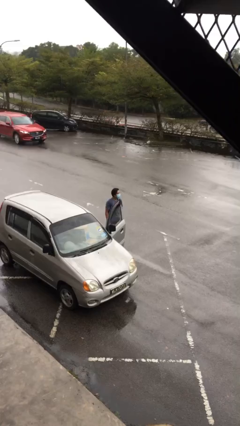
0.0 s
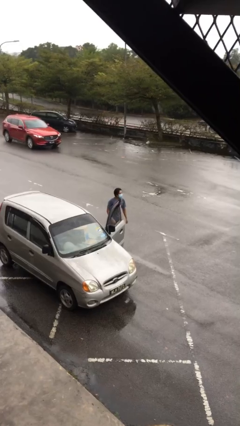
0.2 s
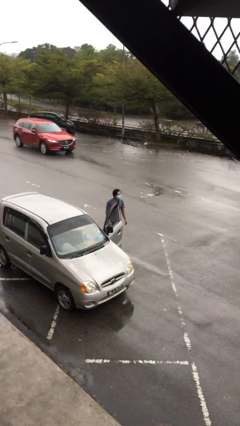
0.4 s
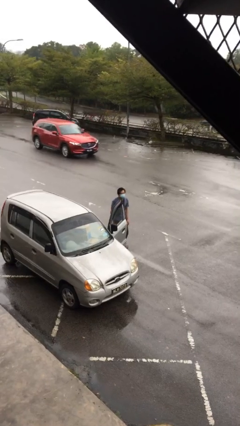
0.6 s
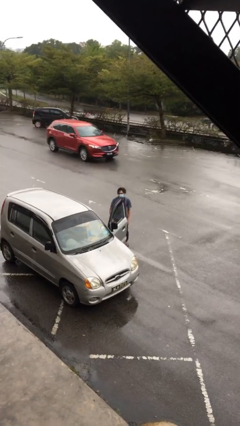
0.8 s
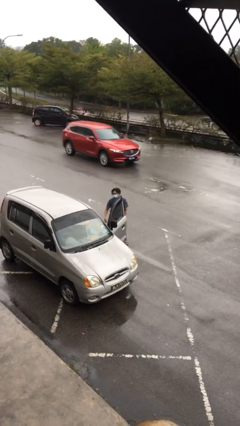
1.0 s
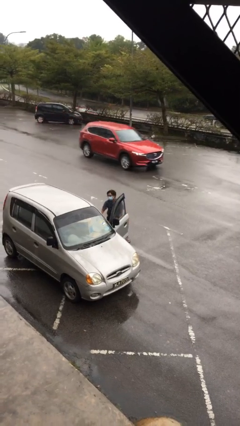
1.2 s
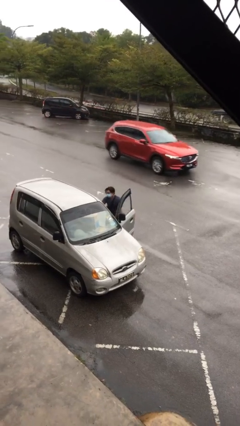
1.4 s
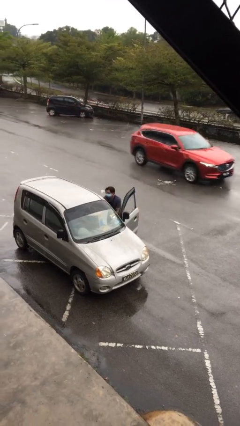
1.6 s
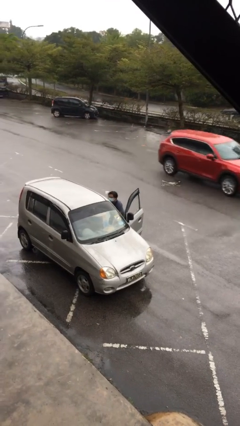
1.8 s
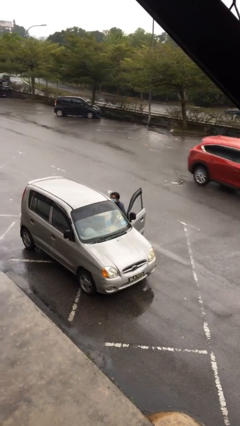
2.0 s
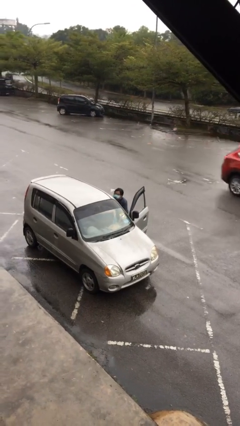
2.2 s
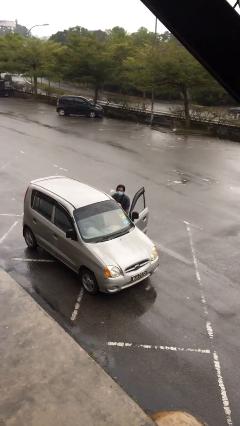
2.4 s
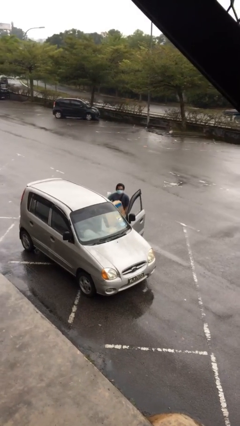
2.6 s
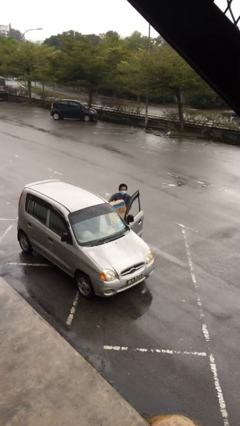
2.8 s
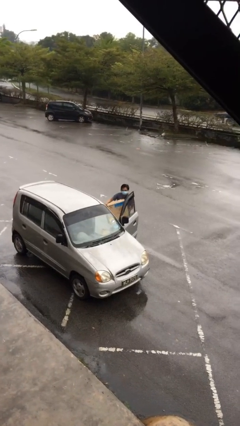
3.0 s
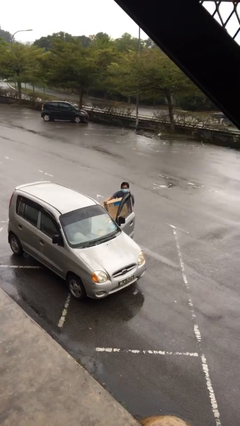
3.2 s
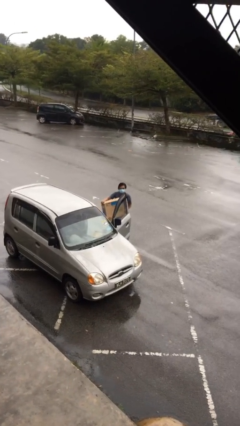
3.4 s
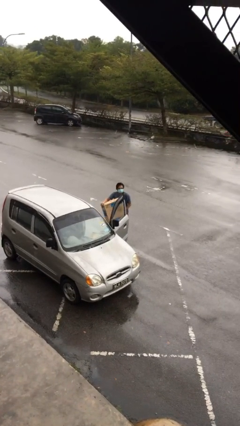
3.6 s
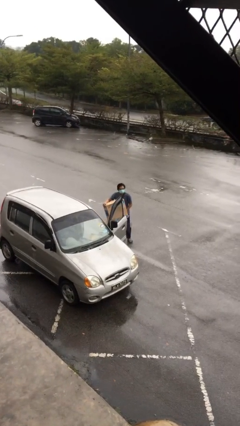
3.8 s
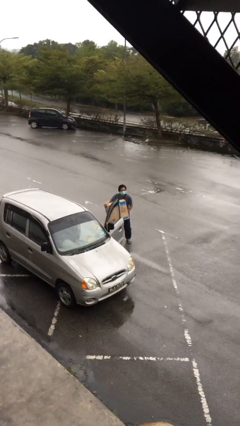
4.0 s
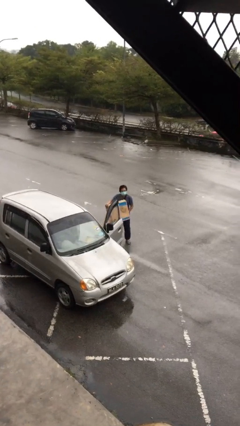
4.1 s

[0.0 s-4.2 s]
person unloads car

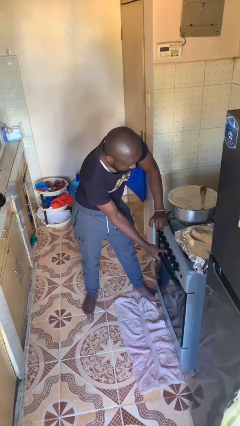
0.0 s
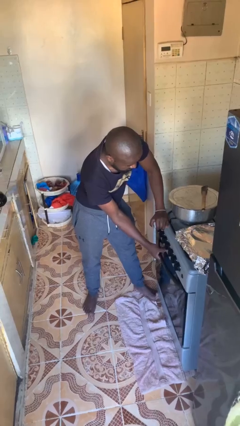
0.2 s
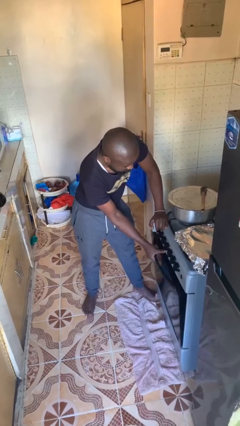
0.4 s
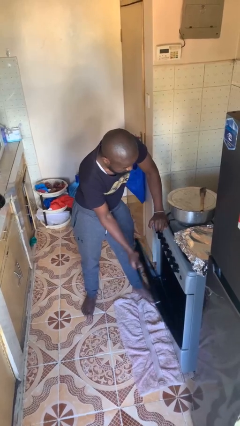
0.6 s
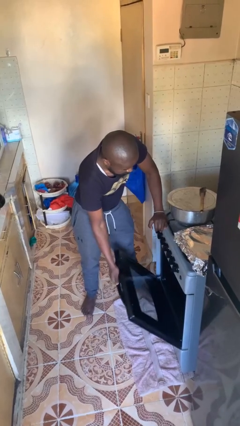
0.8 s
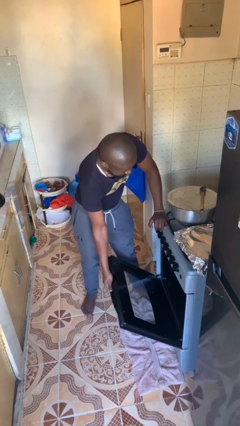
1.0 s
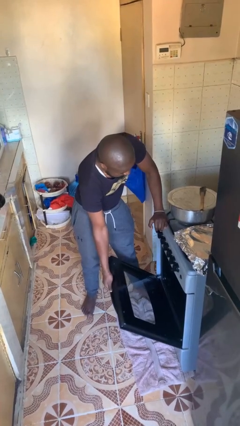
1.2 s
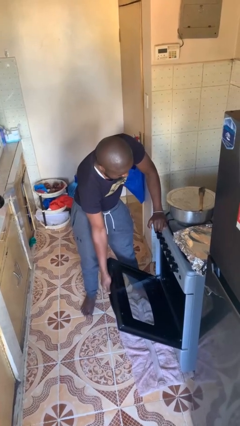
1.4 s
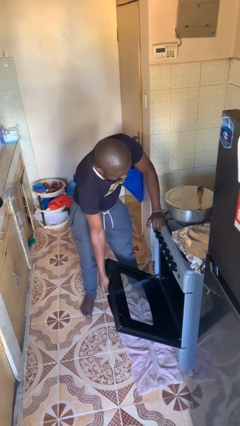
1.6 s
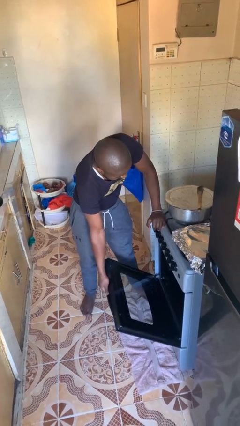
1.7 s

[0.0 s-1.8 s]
person opens oven door

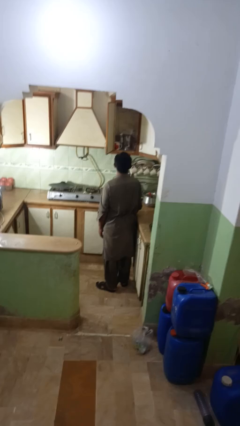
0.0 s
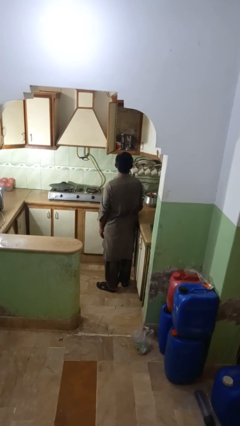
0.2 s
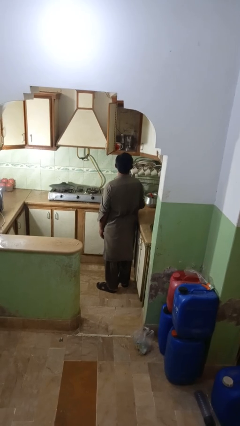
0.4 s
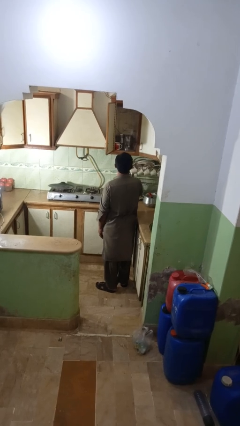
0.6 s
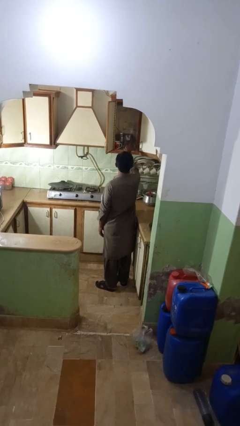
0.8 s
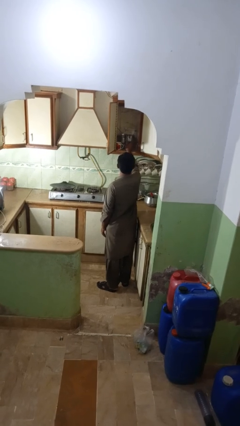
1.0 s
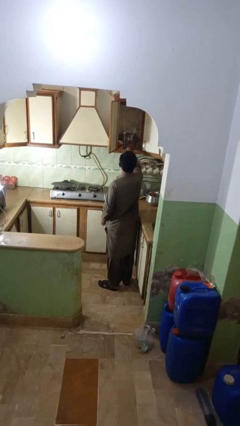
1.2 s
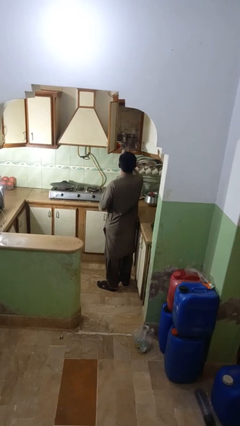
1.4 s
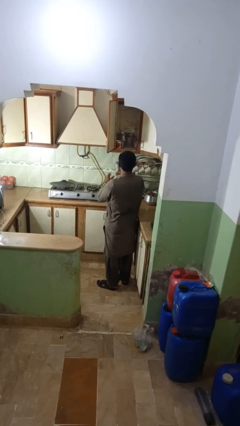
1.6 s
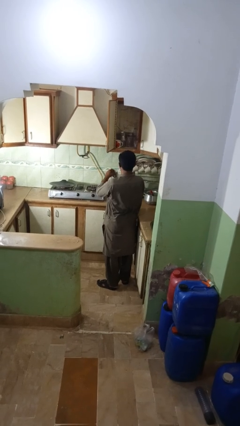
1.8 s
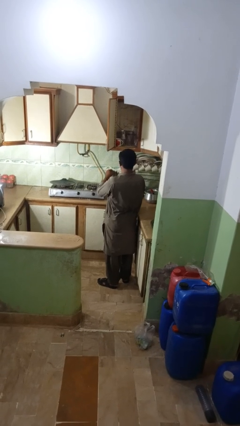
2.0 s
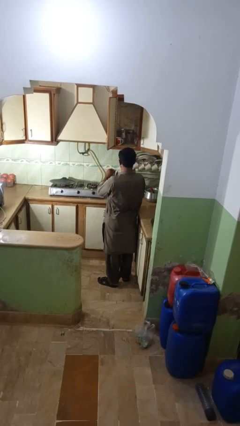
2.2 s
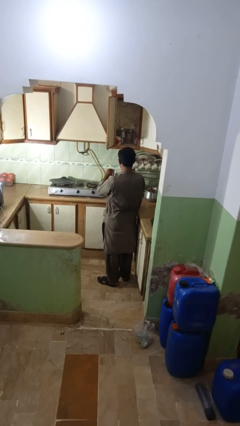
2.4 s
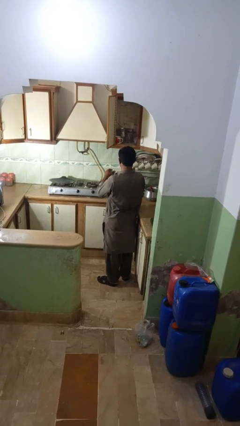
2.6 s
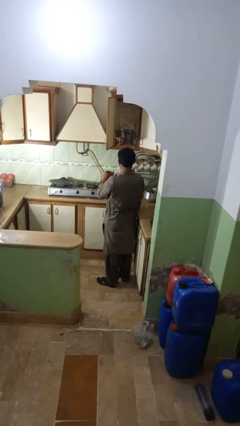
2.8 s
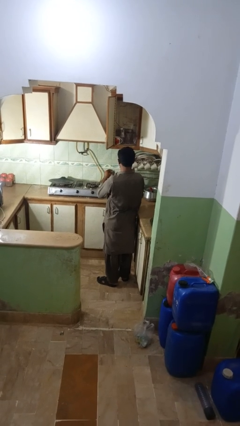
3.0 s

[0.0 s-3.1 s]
person takes object from kitchen drawer

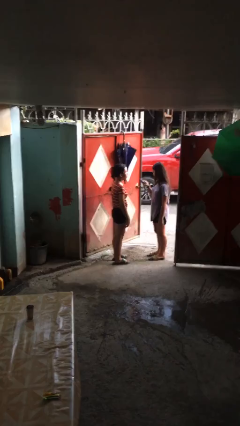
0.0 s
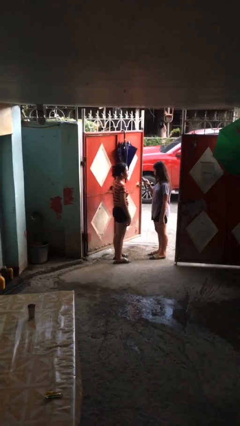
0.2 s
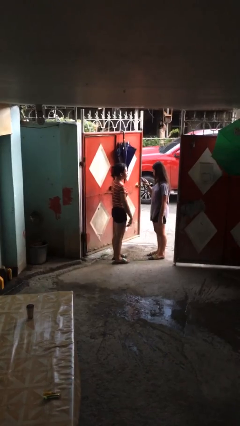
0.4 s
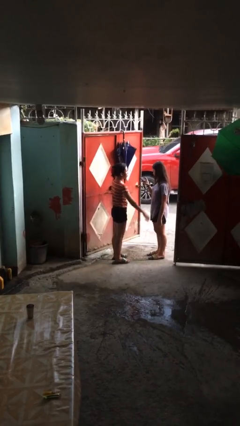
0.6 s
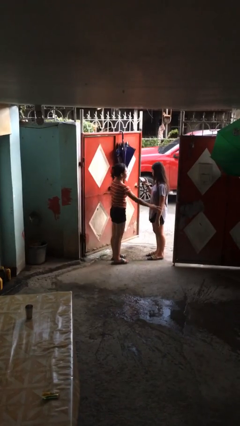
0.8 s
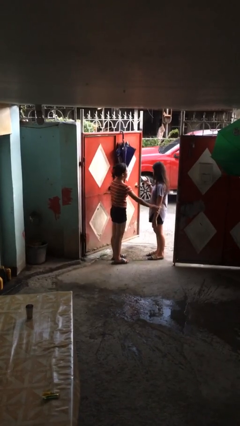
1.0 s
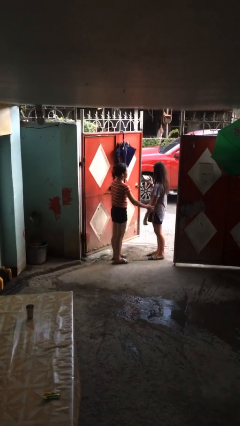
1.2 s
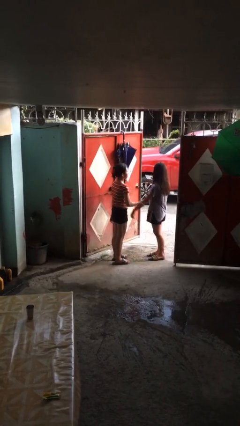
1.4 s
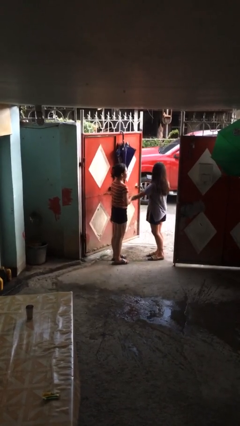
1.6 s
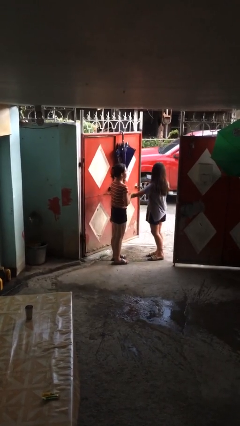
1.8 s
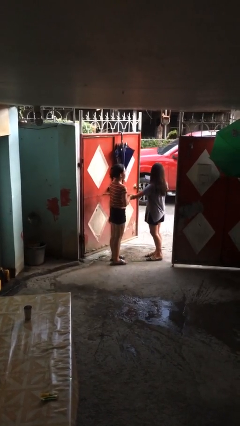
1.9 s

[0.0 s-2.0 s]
person grabs person by forearm

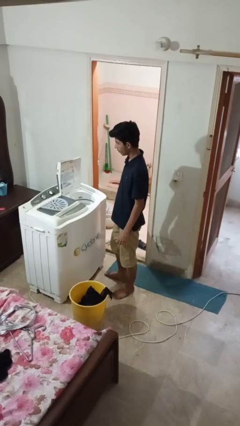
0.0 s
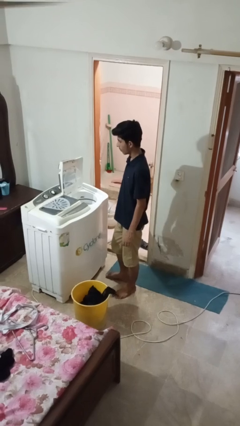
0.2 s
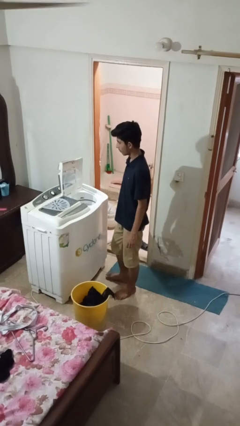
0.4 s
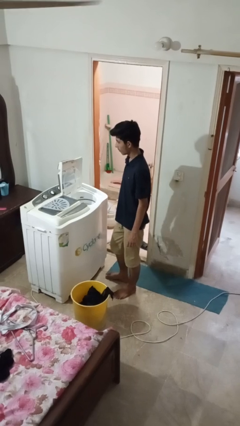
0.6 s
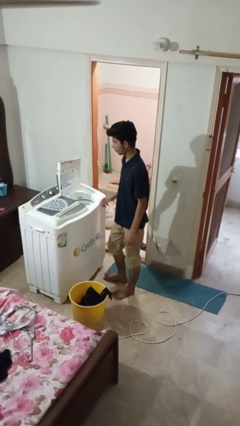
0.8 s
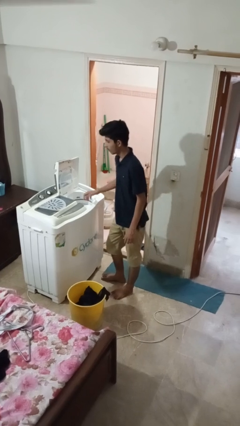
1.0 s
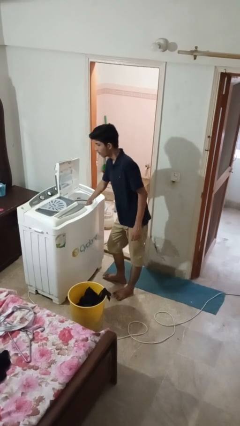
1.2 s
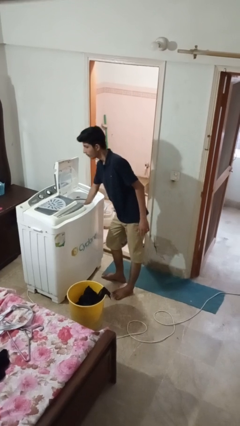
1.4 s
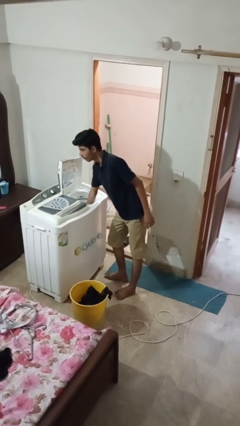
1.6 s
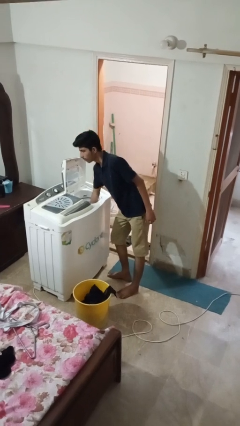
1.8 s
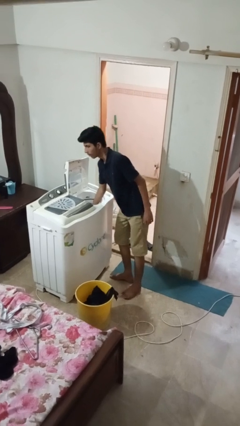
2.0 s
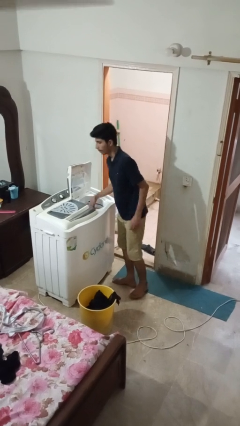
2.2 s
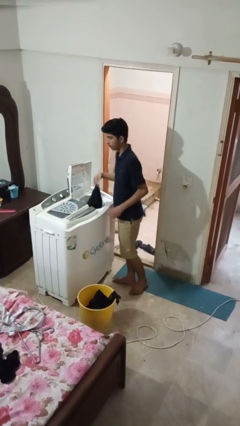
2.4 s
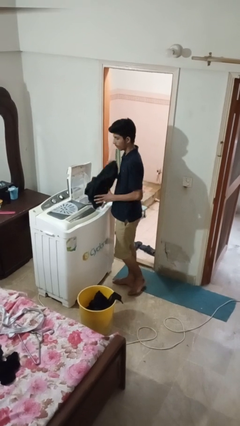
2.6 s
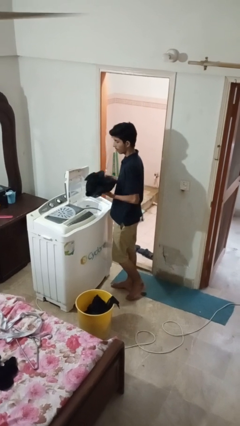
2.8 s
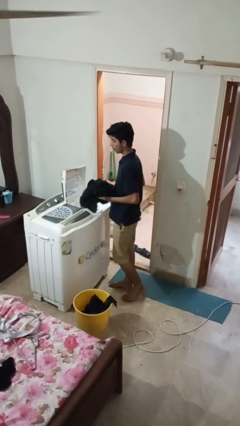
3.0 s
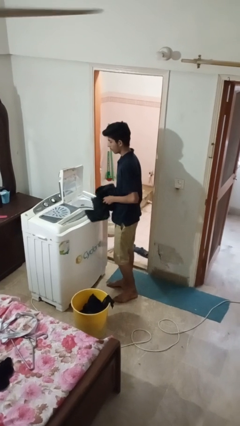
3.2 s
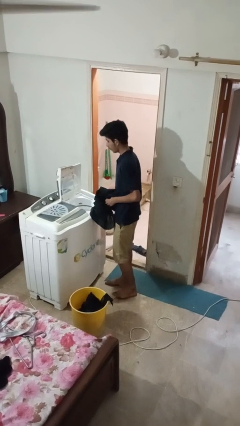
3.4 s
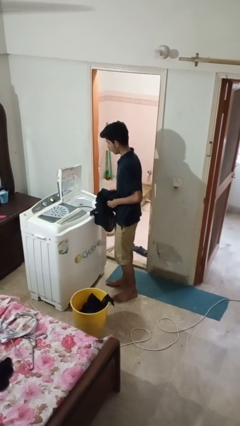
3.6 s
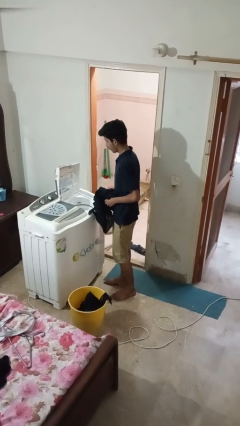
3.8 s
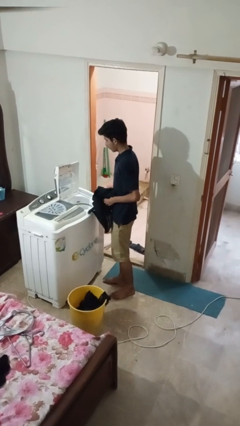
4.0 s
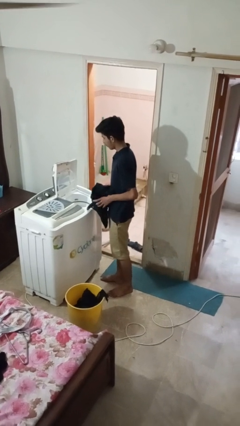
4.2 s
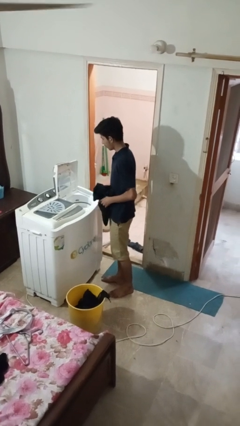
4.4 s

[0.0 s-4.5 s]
person unloads dryer

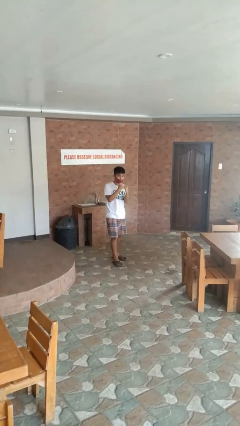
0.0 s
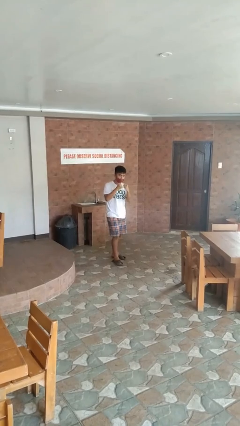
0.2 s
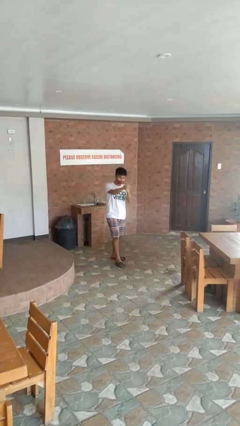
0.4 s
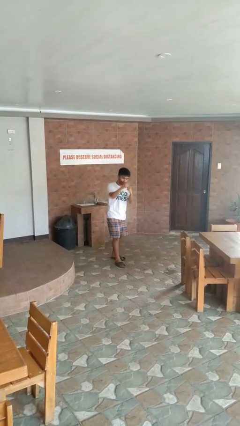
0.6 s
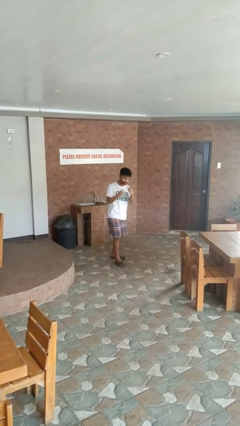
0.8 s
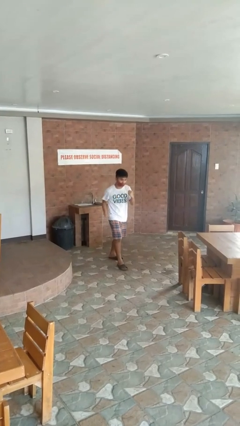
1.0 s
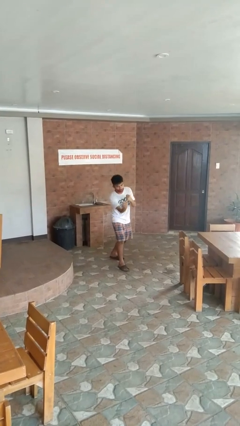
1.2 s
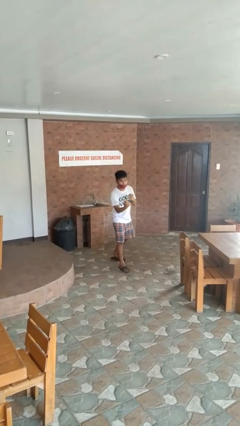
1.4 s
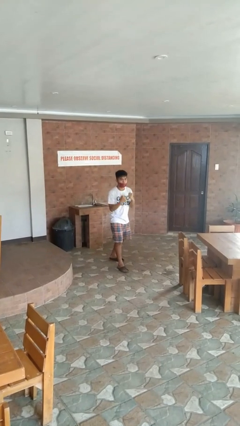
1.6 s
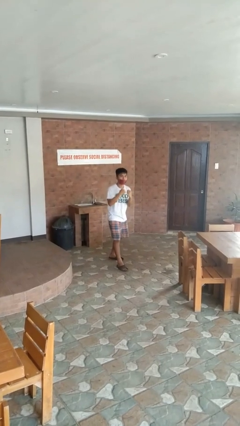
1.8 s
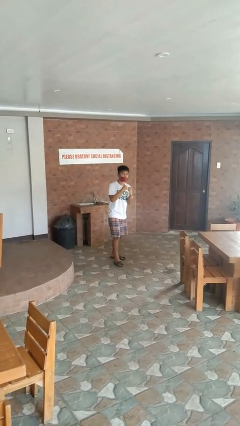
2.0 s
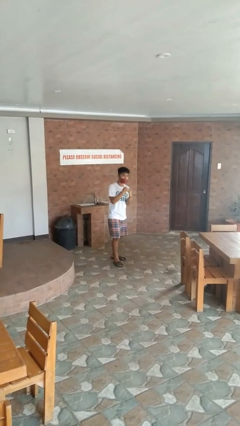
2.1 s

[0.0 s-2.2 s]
person punches
